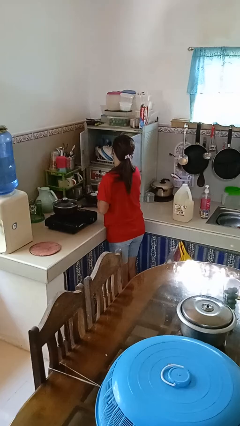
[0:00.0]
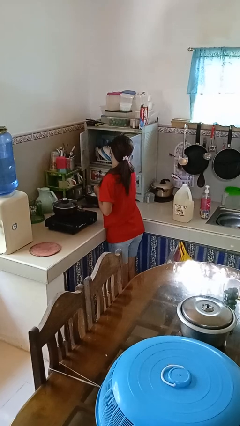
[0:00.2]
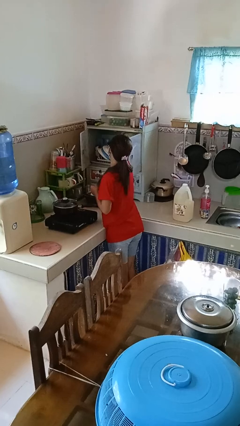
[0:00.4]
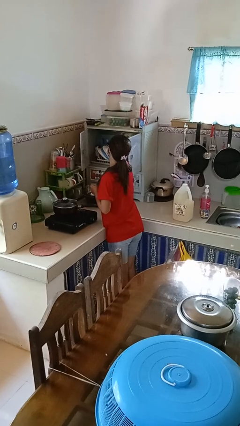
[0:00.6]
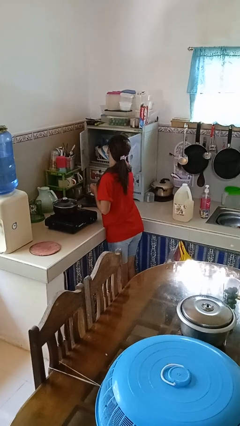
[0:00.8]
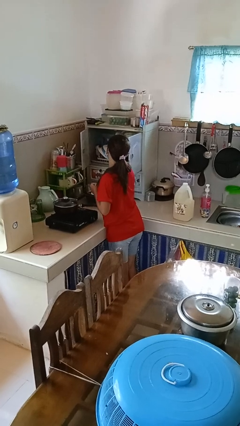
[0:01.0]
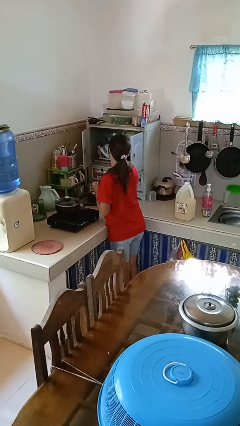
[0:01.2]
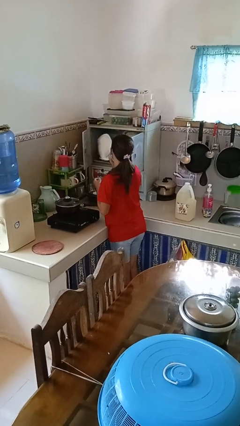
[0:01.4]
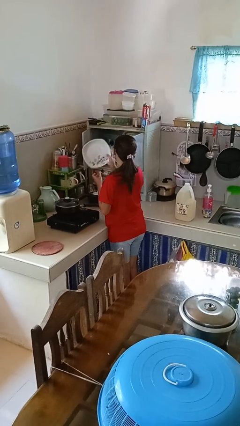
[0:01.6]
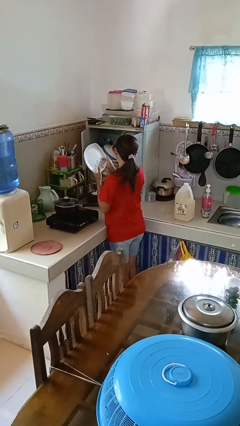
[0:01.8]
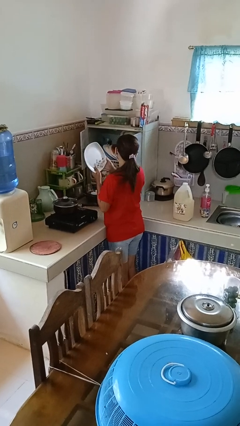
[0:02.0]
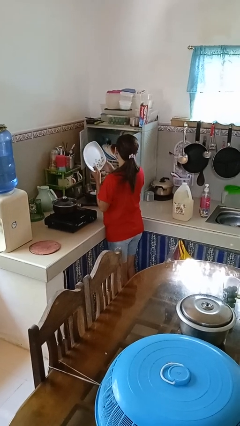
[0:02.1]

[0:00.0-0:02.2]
person takes object from cabinet

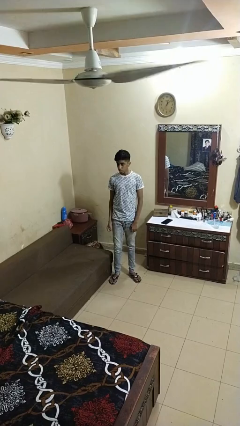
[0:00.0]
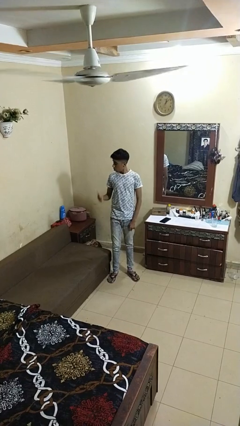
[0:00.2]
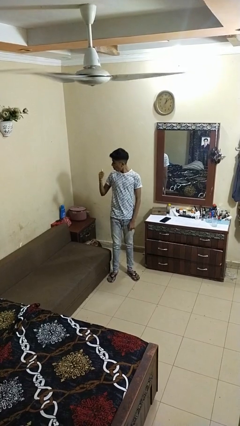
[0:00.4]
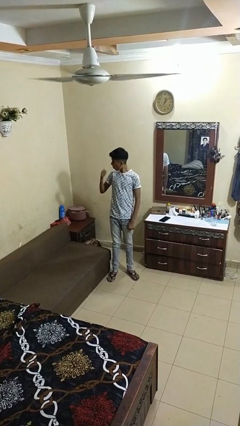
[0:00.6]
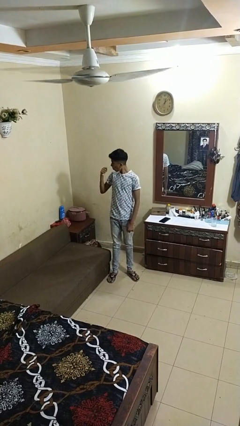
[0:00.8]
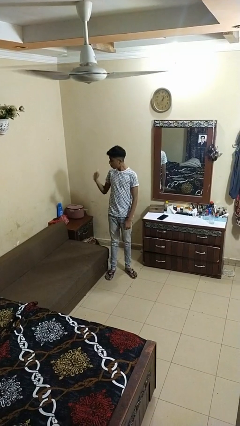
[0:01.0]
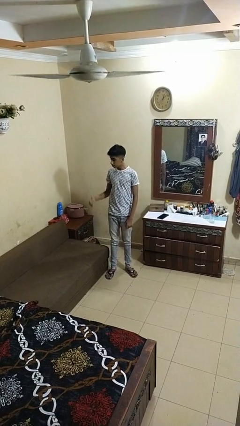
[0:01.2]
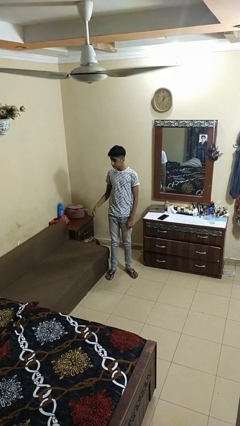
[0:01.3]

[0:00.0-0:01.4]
person gestures behind me

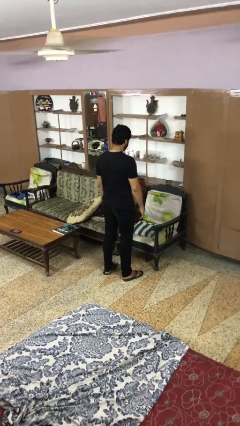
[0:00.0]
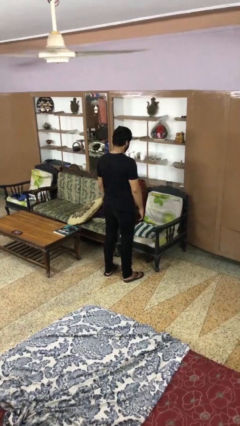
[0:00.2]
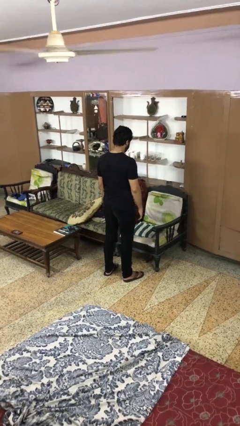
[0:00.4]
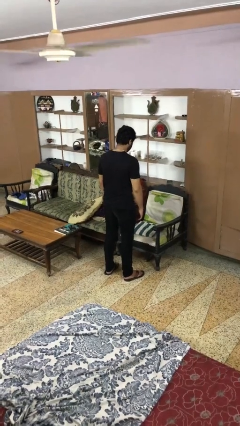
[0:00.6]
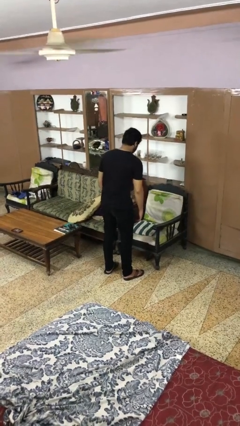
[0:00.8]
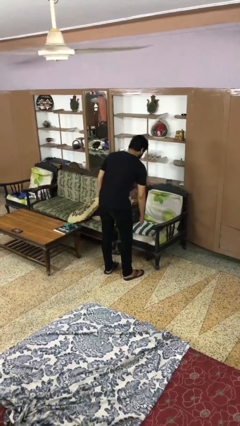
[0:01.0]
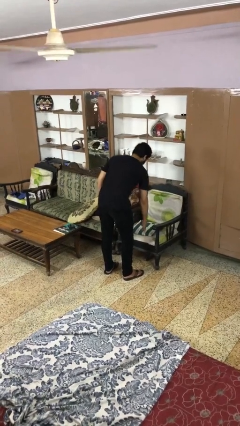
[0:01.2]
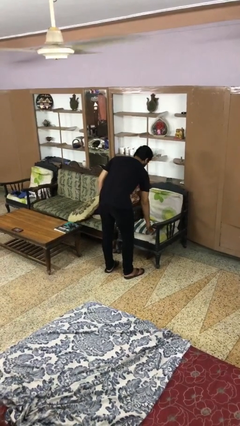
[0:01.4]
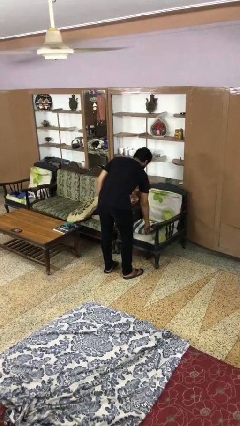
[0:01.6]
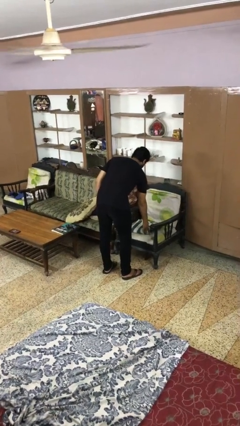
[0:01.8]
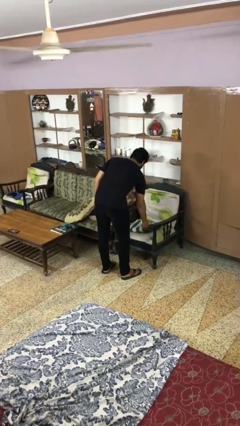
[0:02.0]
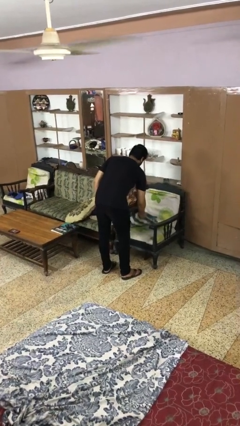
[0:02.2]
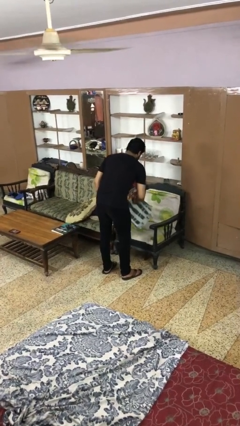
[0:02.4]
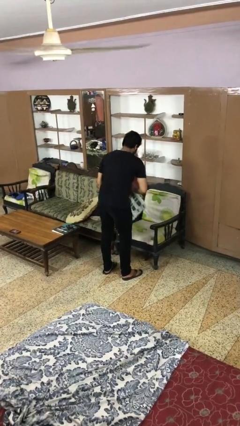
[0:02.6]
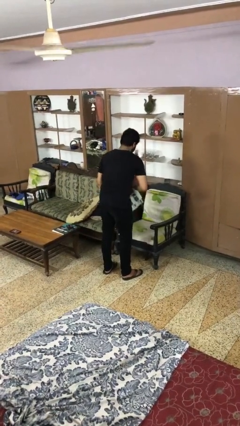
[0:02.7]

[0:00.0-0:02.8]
person picks up object from couch

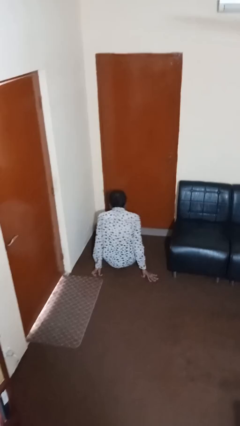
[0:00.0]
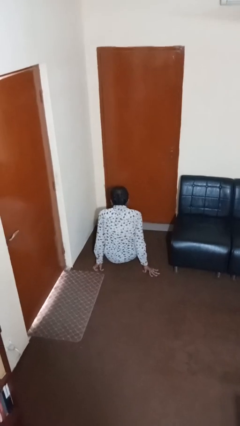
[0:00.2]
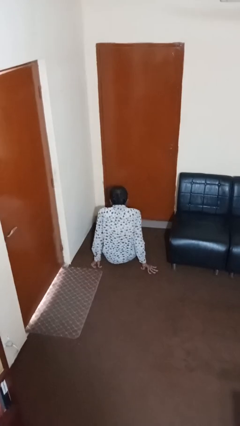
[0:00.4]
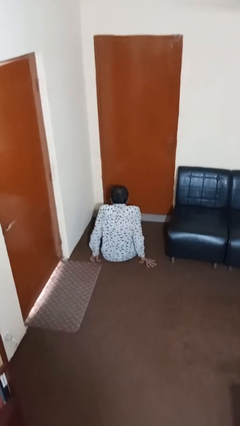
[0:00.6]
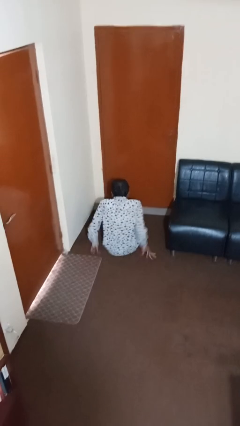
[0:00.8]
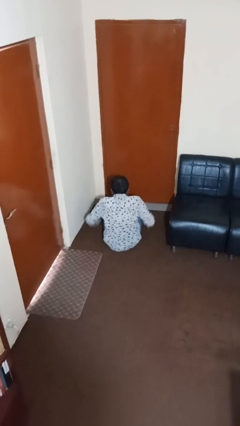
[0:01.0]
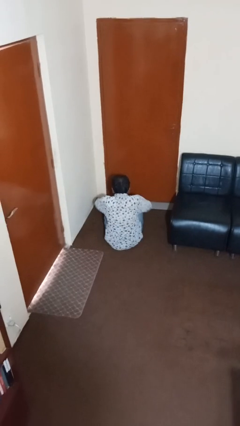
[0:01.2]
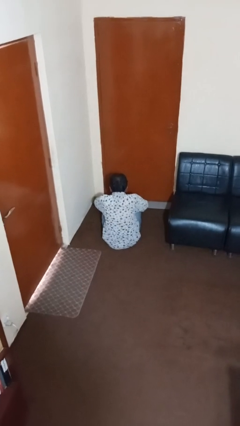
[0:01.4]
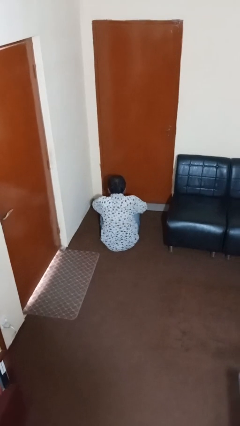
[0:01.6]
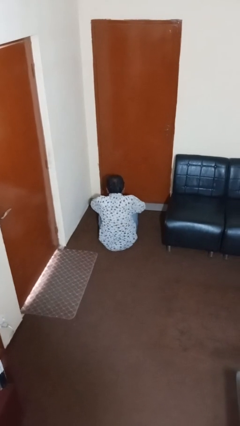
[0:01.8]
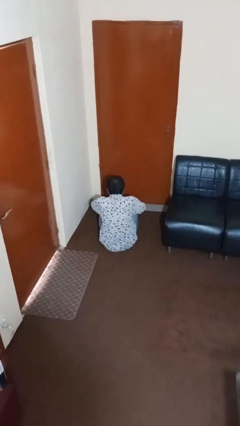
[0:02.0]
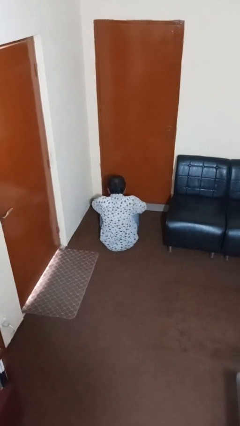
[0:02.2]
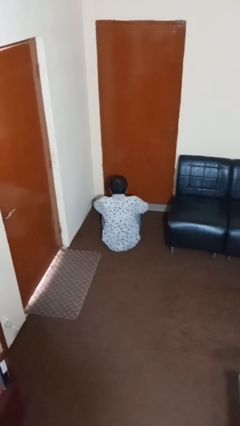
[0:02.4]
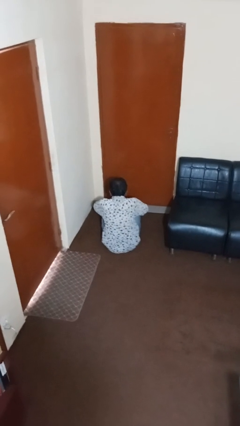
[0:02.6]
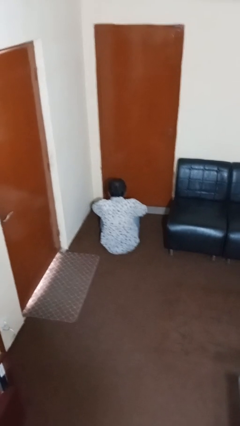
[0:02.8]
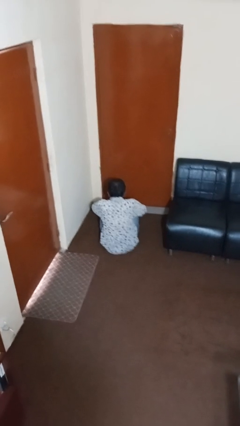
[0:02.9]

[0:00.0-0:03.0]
person sits crisscross

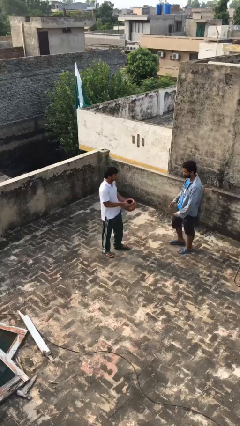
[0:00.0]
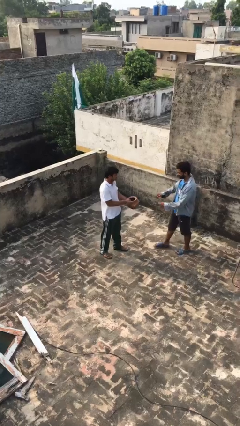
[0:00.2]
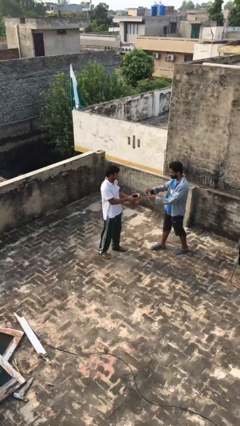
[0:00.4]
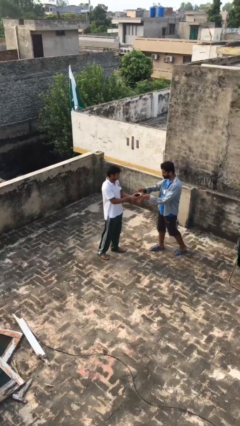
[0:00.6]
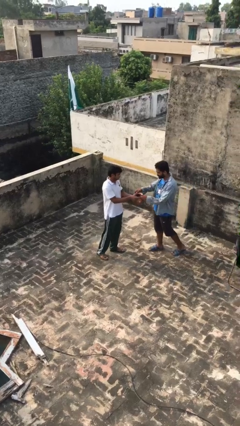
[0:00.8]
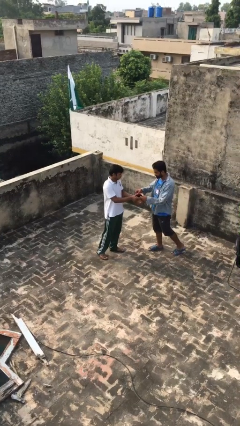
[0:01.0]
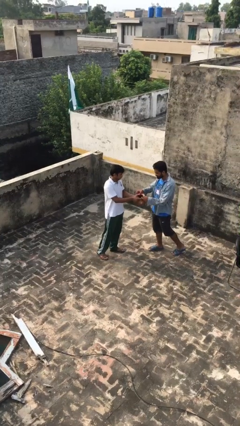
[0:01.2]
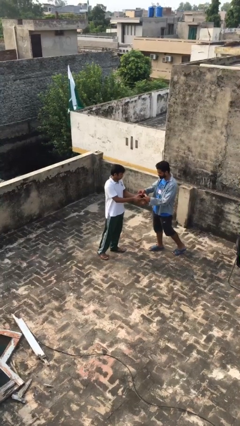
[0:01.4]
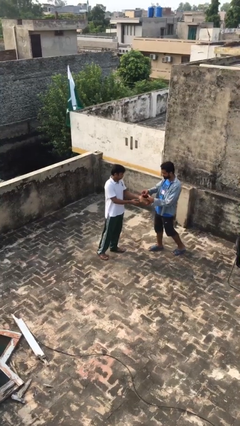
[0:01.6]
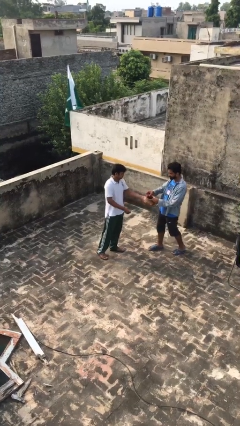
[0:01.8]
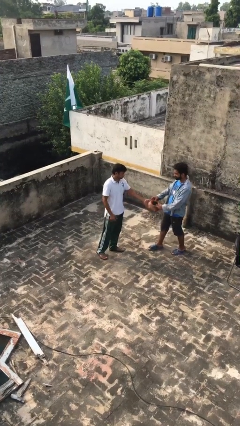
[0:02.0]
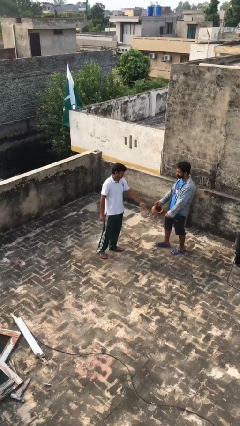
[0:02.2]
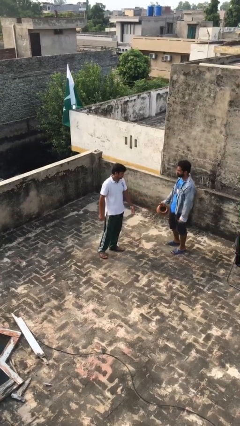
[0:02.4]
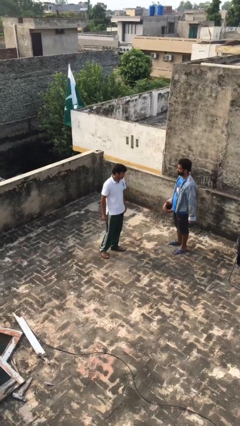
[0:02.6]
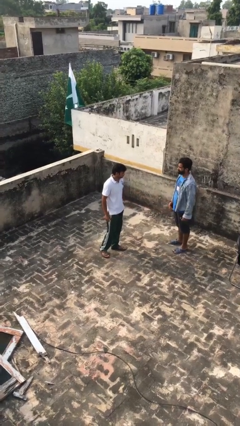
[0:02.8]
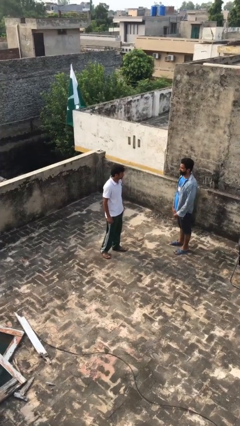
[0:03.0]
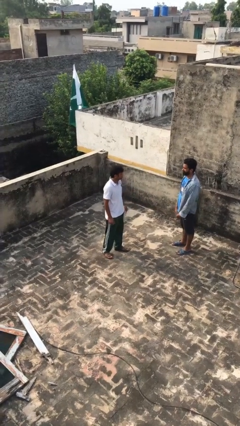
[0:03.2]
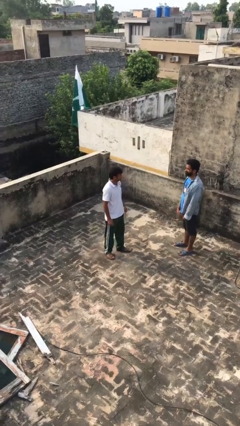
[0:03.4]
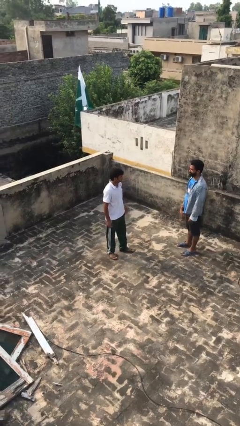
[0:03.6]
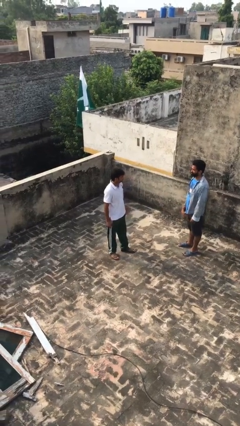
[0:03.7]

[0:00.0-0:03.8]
person transfers object to person

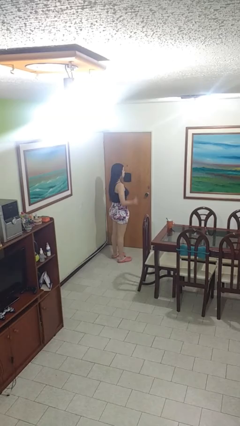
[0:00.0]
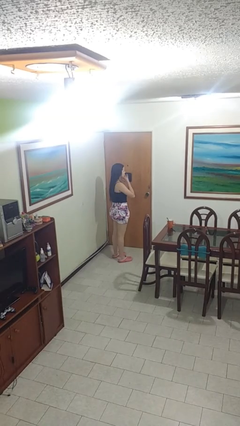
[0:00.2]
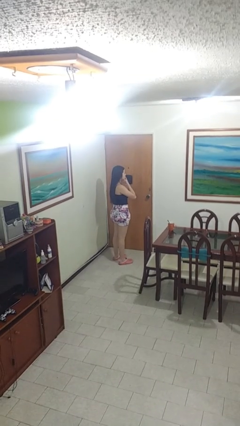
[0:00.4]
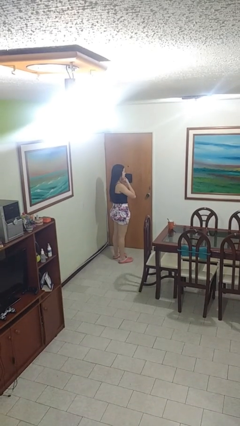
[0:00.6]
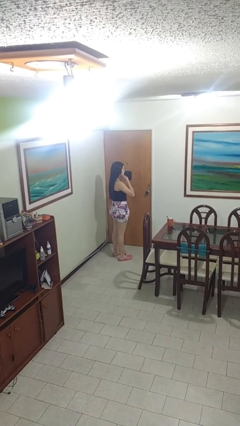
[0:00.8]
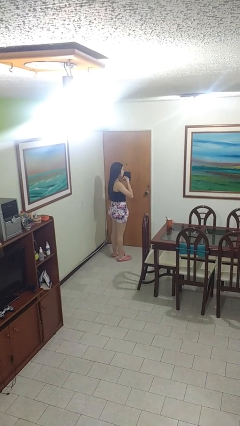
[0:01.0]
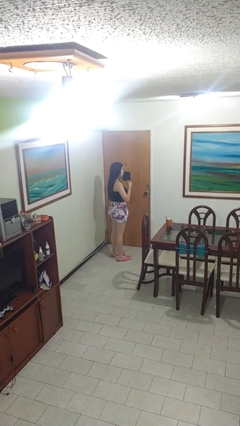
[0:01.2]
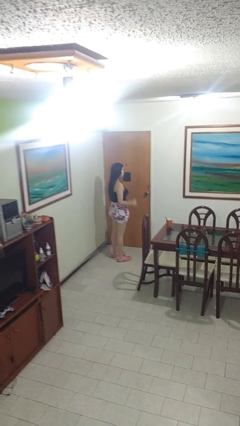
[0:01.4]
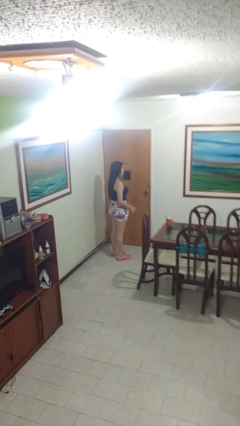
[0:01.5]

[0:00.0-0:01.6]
person strokes chin

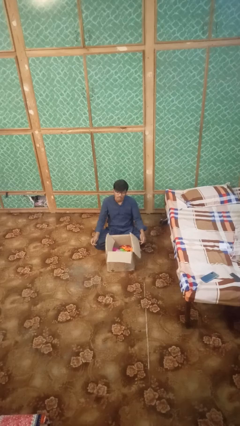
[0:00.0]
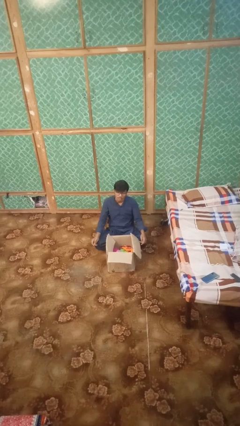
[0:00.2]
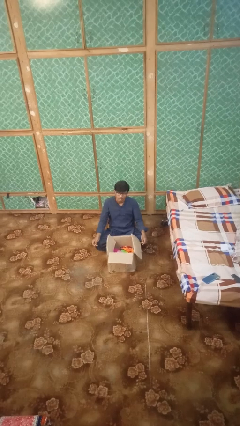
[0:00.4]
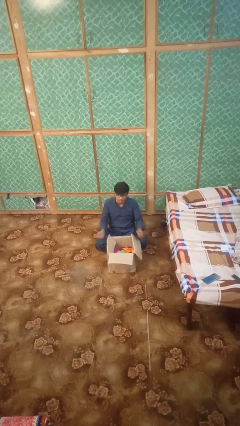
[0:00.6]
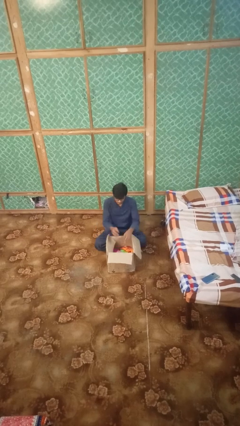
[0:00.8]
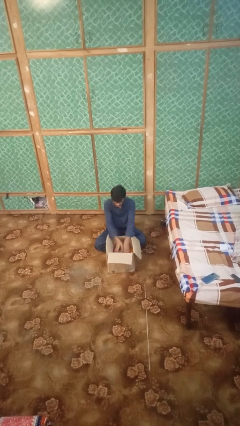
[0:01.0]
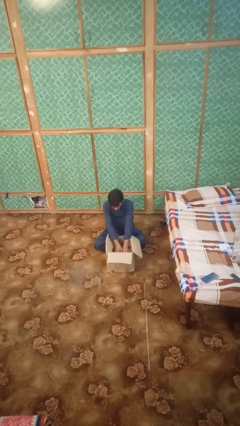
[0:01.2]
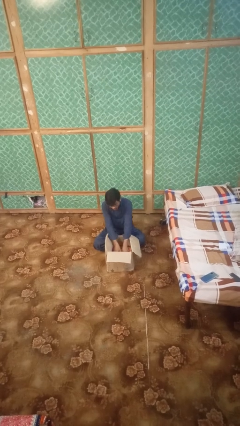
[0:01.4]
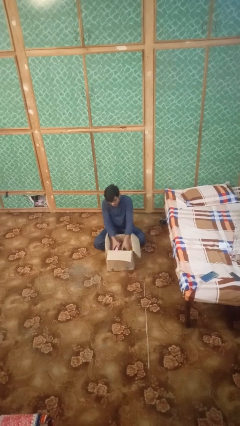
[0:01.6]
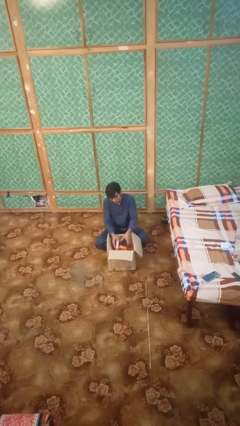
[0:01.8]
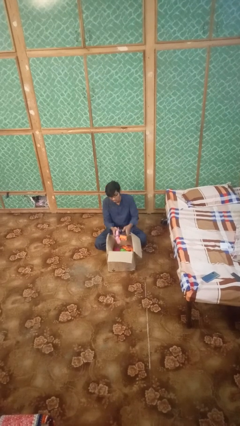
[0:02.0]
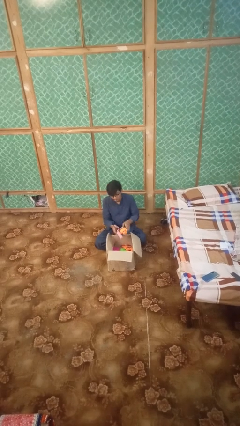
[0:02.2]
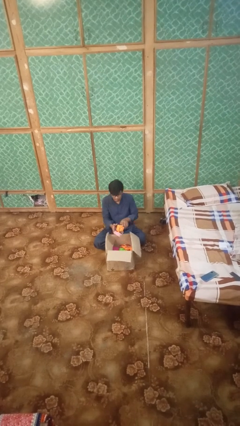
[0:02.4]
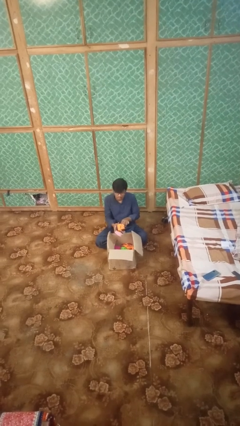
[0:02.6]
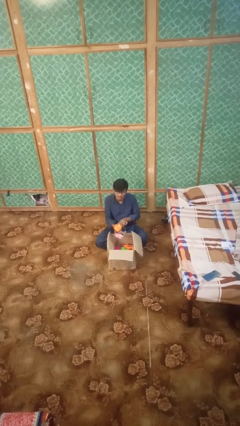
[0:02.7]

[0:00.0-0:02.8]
person takes object from box
